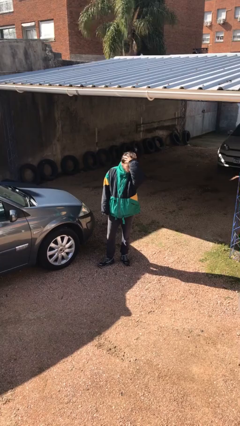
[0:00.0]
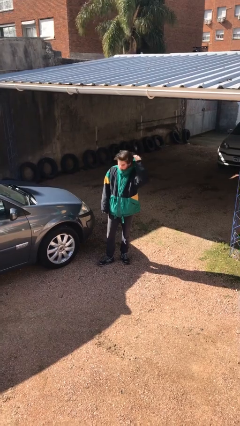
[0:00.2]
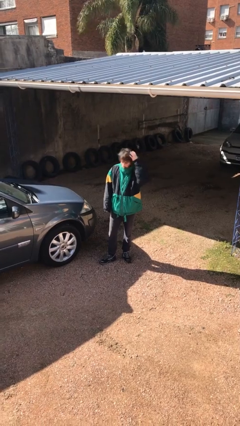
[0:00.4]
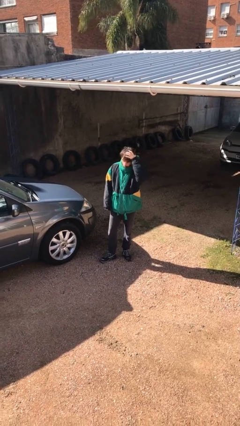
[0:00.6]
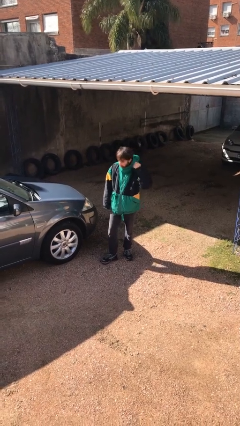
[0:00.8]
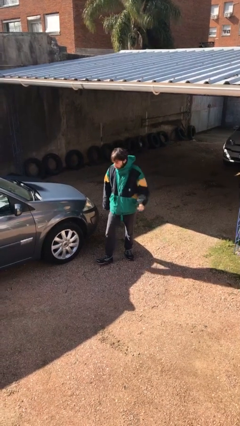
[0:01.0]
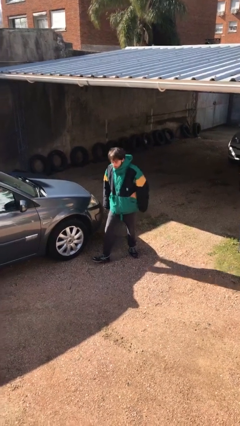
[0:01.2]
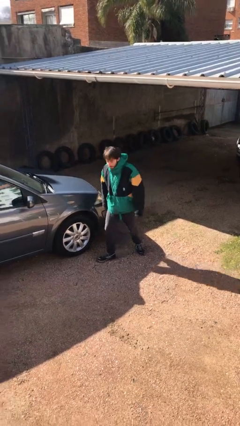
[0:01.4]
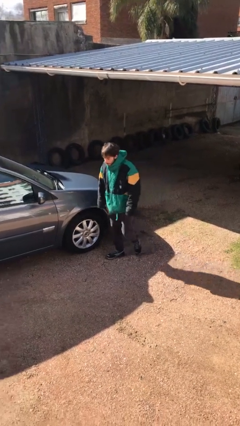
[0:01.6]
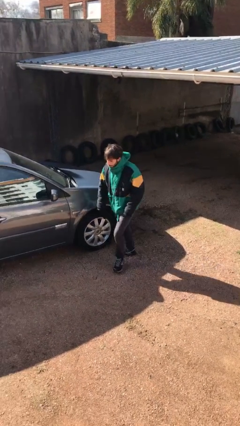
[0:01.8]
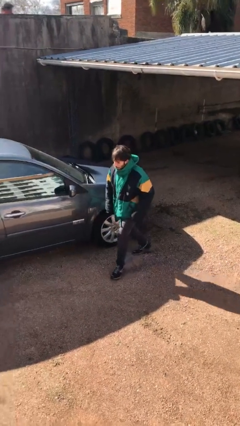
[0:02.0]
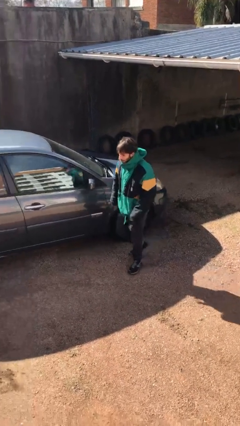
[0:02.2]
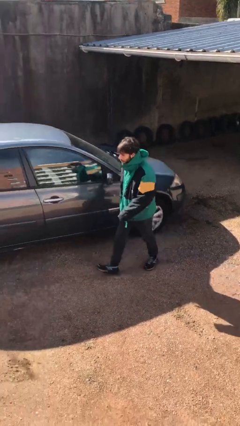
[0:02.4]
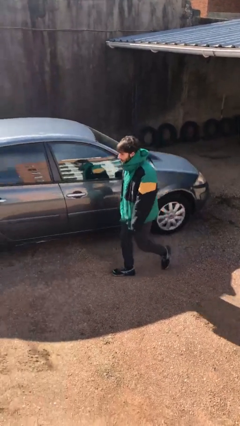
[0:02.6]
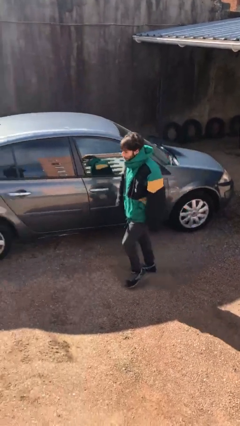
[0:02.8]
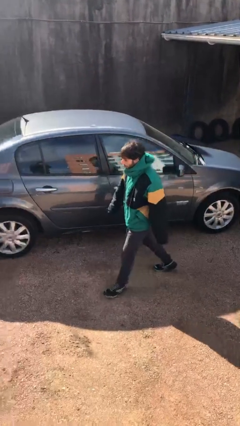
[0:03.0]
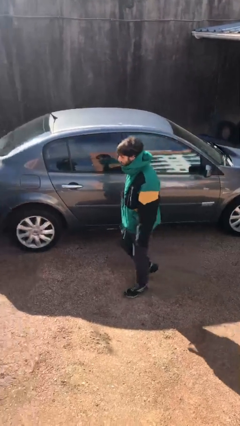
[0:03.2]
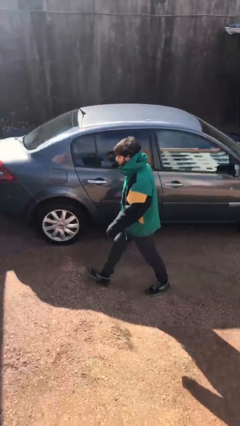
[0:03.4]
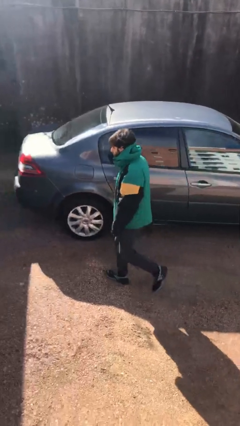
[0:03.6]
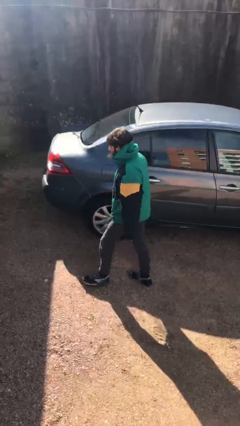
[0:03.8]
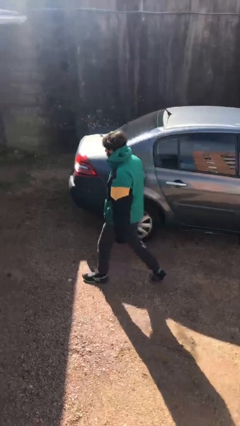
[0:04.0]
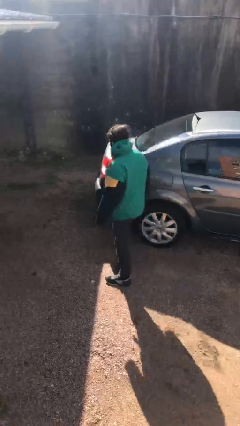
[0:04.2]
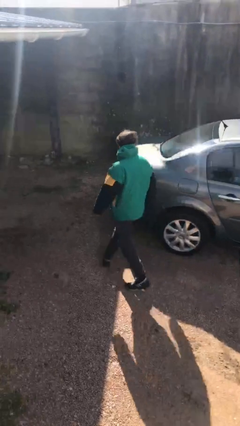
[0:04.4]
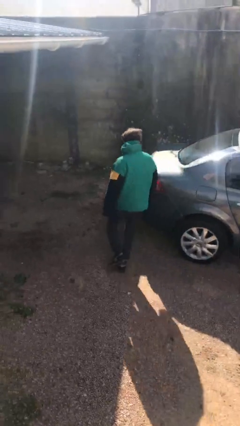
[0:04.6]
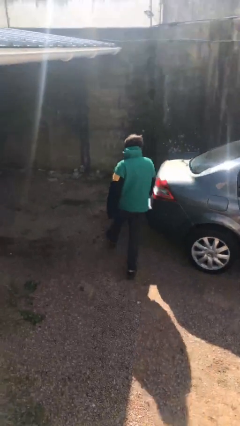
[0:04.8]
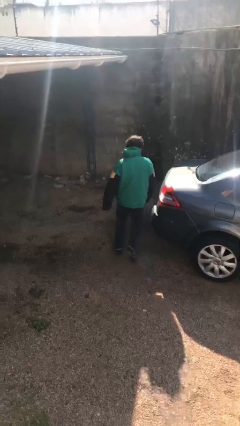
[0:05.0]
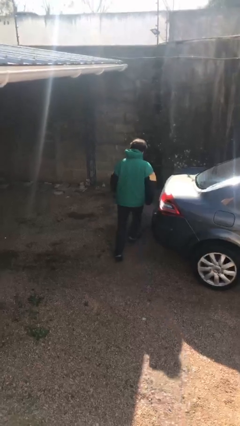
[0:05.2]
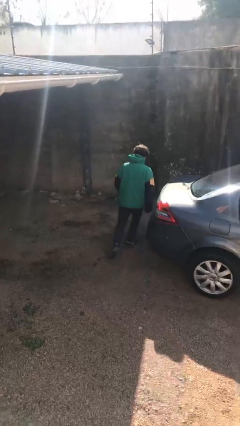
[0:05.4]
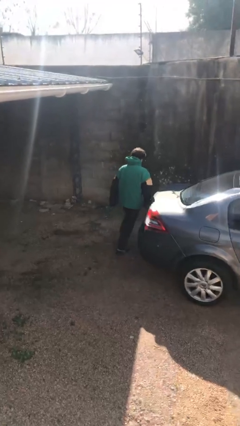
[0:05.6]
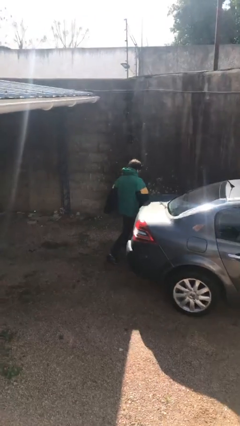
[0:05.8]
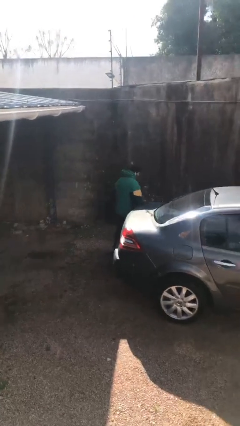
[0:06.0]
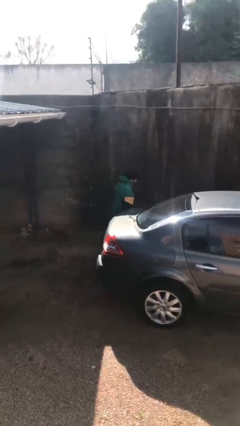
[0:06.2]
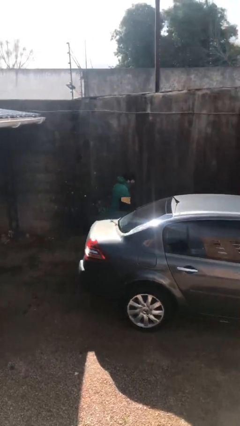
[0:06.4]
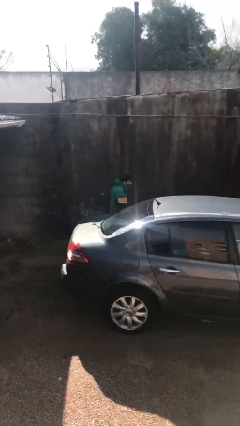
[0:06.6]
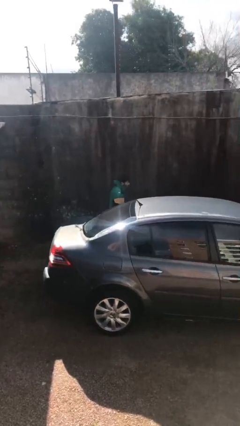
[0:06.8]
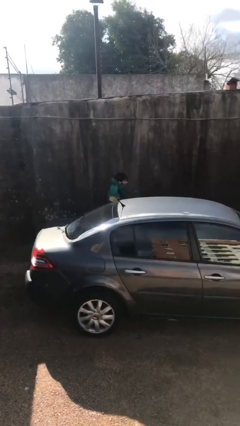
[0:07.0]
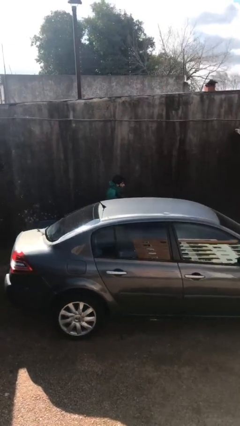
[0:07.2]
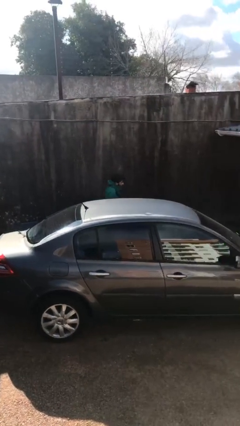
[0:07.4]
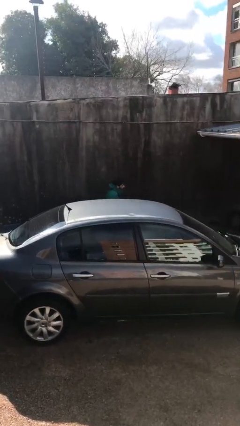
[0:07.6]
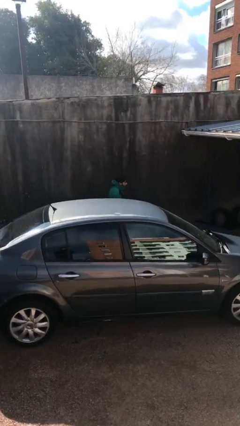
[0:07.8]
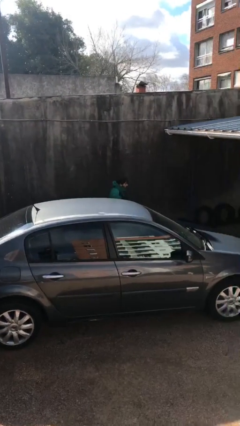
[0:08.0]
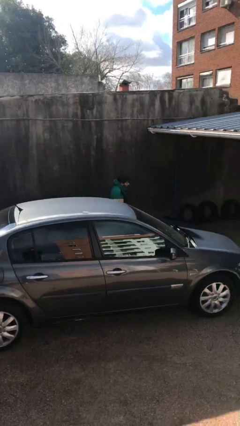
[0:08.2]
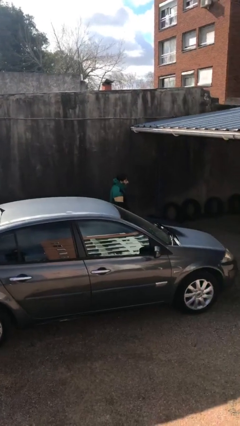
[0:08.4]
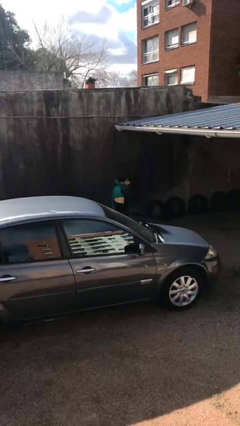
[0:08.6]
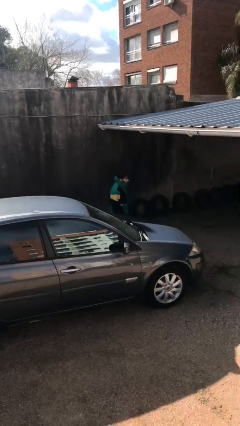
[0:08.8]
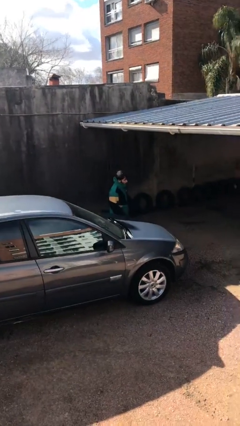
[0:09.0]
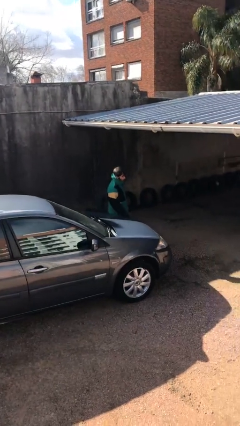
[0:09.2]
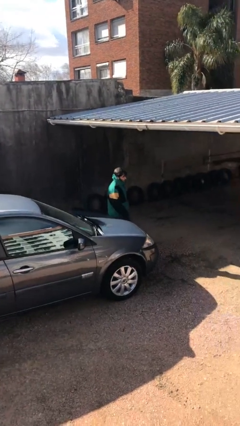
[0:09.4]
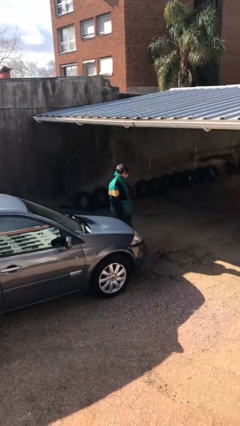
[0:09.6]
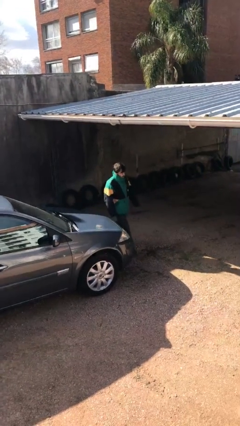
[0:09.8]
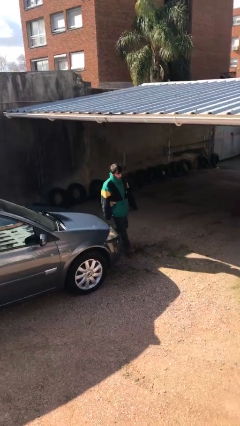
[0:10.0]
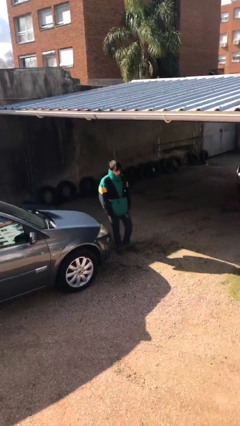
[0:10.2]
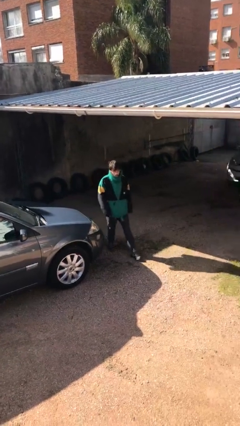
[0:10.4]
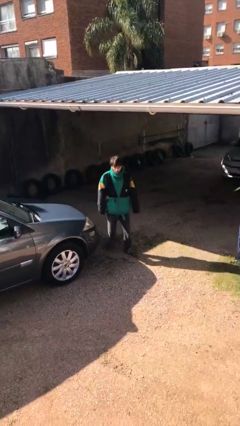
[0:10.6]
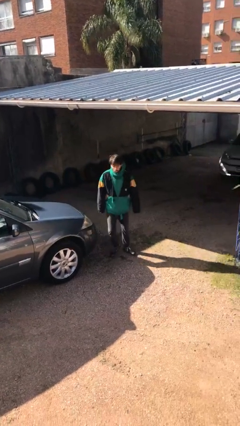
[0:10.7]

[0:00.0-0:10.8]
person walks around car

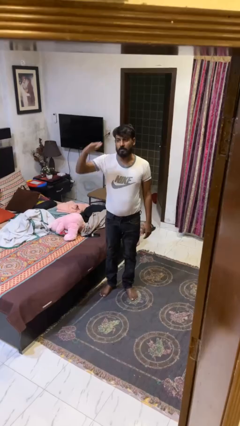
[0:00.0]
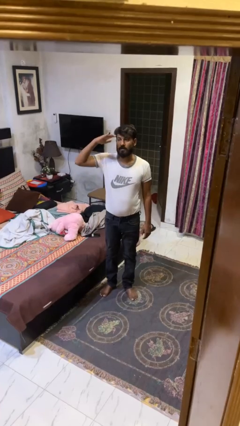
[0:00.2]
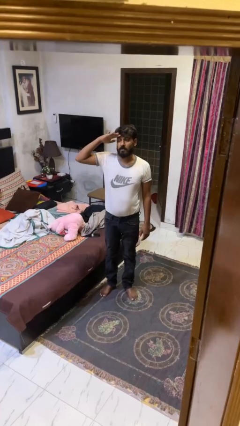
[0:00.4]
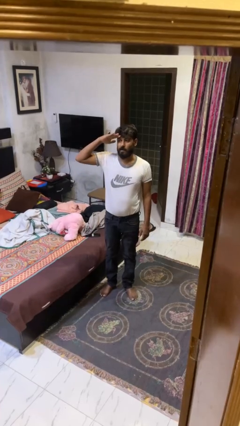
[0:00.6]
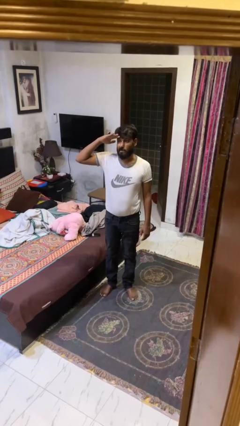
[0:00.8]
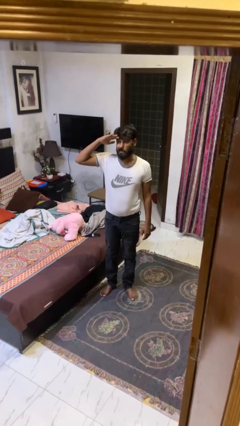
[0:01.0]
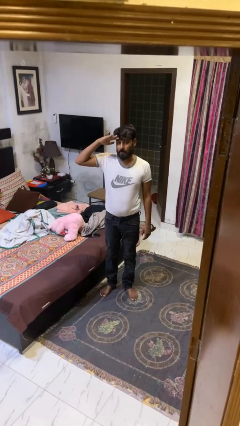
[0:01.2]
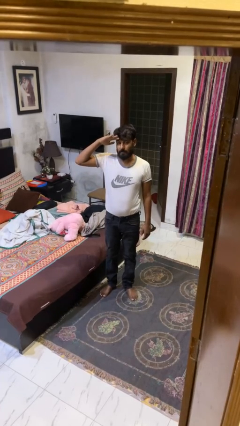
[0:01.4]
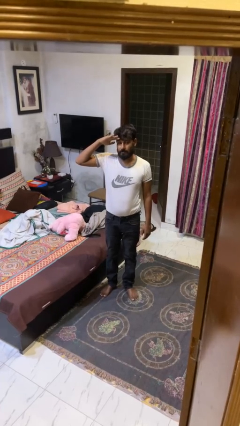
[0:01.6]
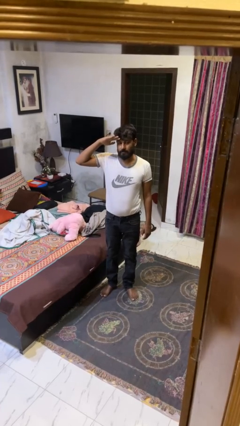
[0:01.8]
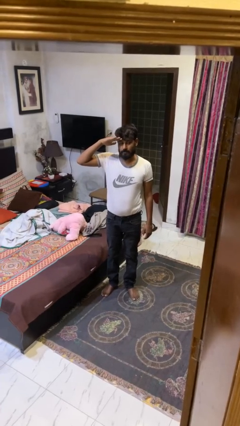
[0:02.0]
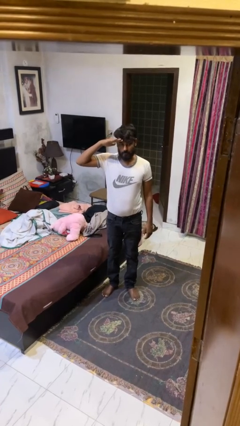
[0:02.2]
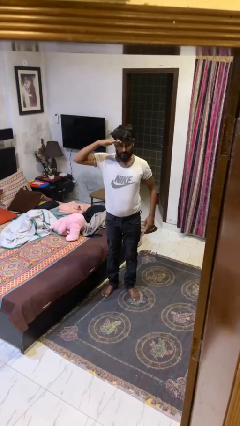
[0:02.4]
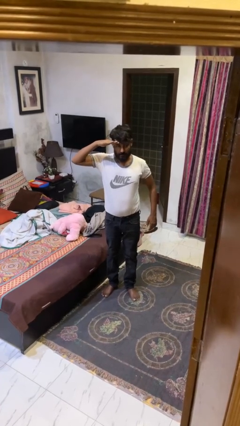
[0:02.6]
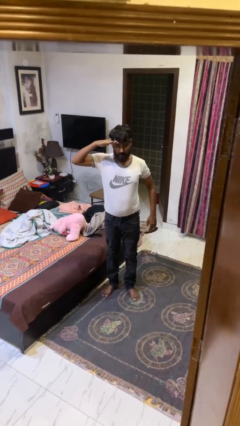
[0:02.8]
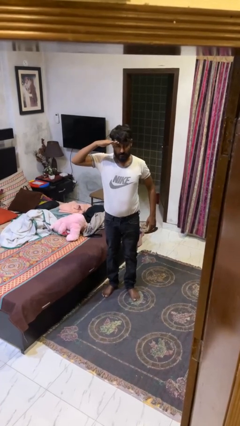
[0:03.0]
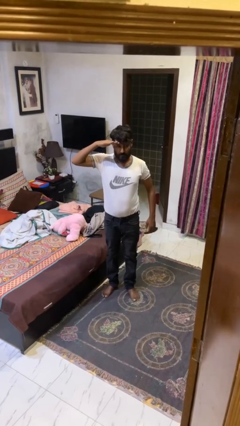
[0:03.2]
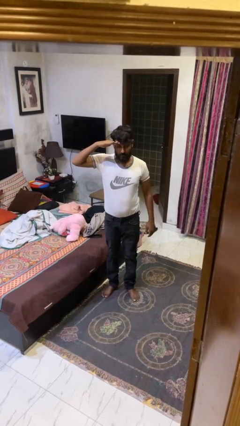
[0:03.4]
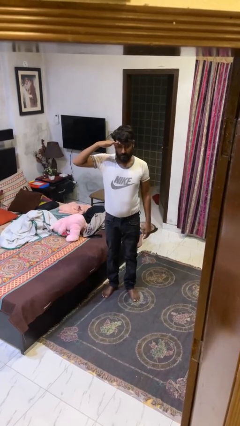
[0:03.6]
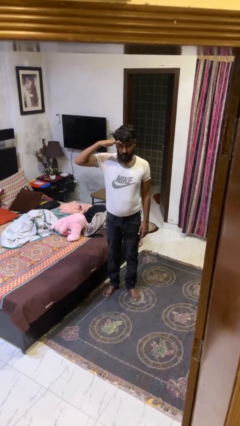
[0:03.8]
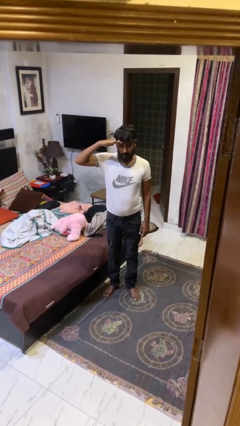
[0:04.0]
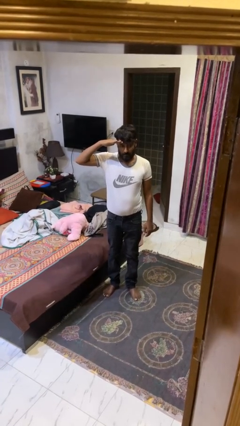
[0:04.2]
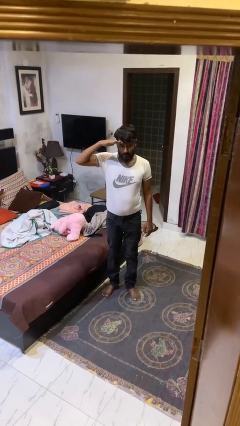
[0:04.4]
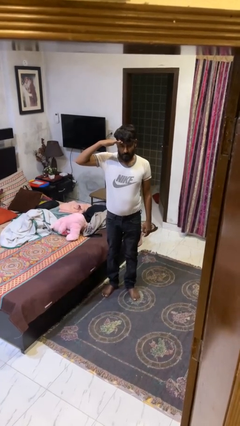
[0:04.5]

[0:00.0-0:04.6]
person salutes

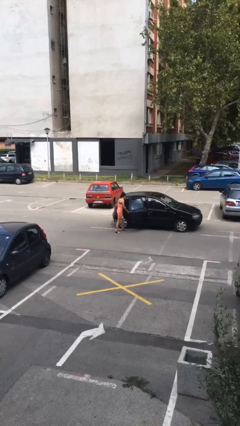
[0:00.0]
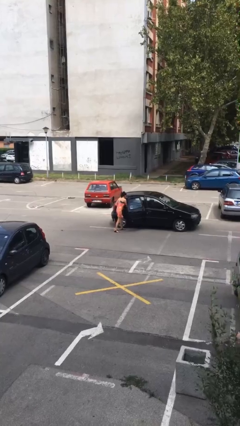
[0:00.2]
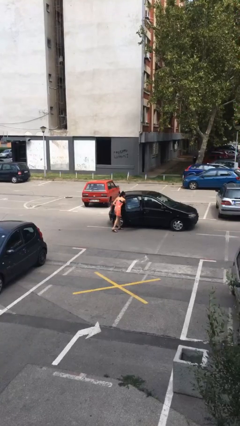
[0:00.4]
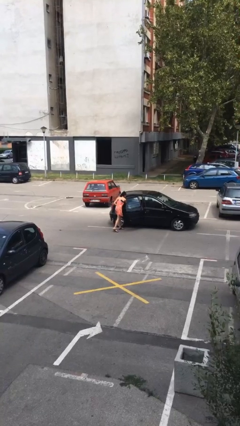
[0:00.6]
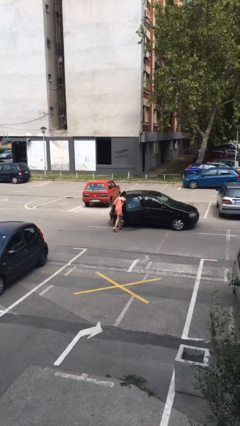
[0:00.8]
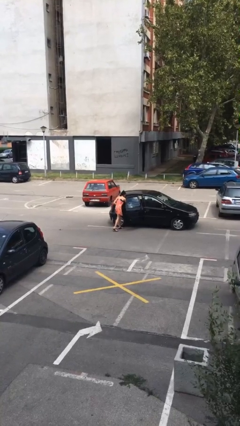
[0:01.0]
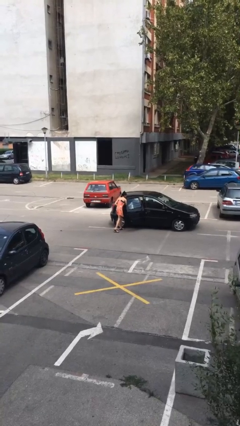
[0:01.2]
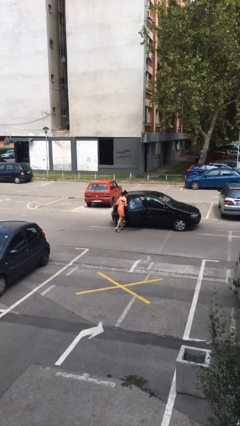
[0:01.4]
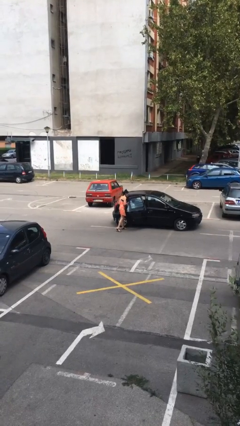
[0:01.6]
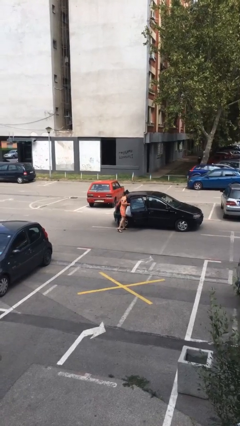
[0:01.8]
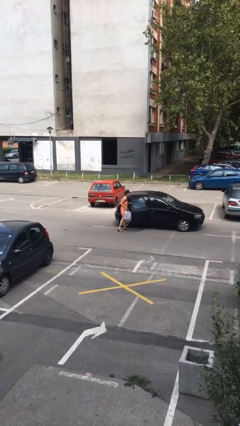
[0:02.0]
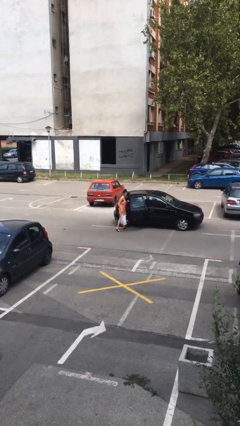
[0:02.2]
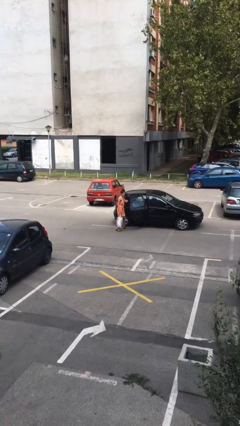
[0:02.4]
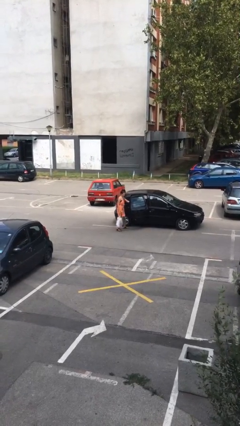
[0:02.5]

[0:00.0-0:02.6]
person unloads car
